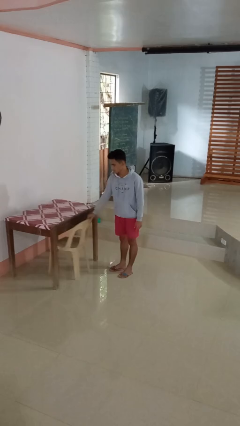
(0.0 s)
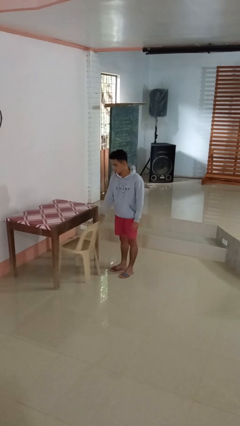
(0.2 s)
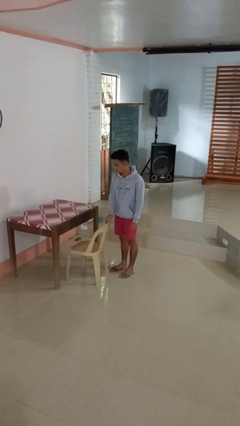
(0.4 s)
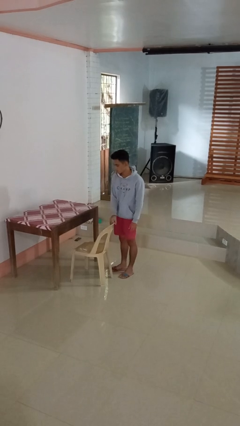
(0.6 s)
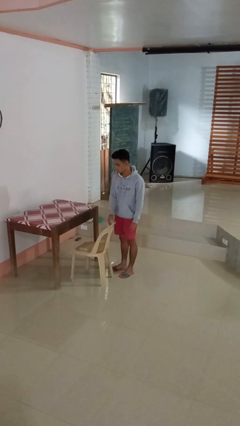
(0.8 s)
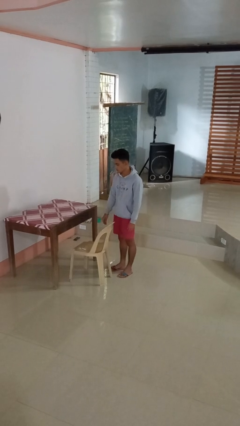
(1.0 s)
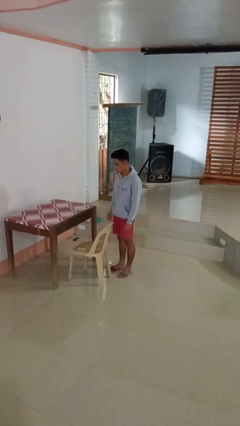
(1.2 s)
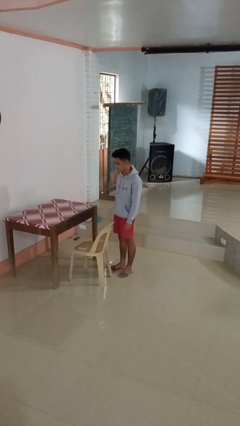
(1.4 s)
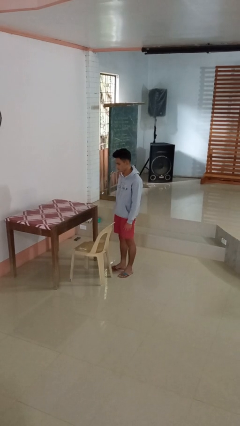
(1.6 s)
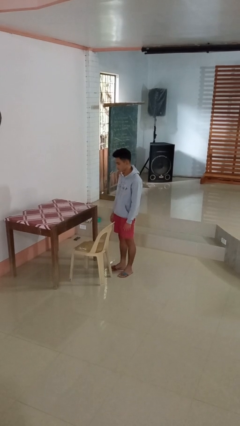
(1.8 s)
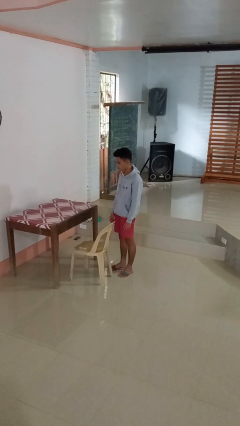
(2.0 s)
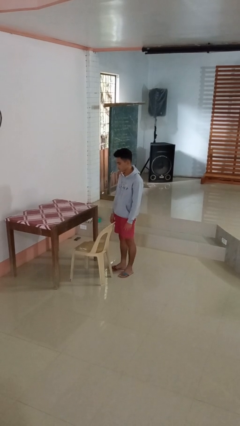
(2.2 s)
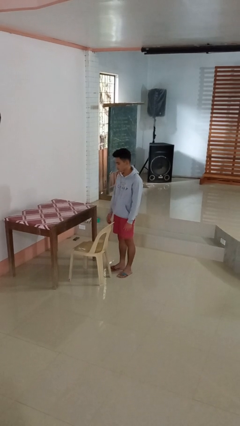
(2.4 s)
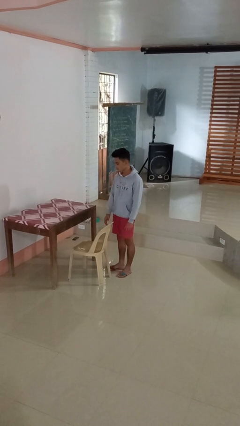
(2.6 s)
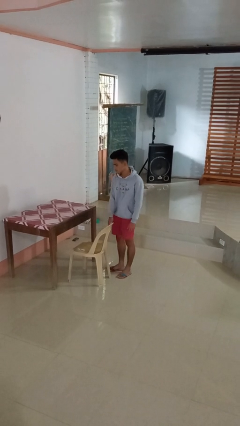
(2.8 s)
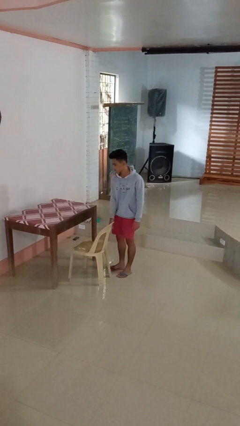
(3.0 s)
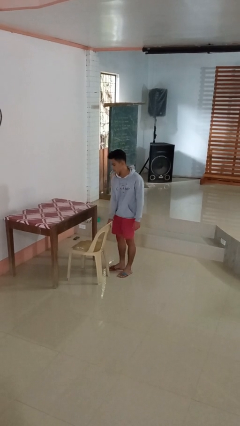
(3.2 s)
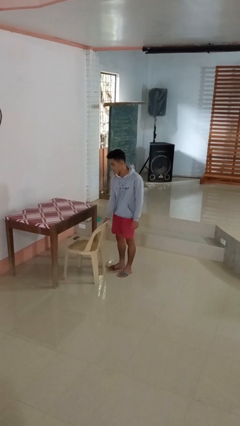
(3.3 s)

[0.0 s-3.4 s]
person pulls out chair

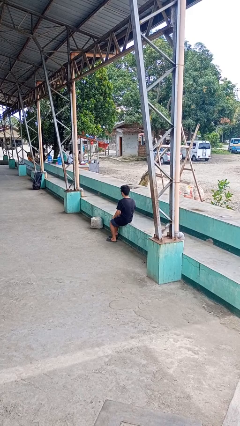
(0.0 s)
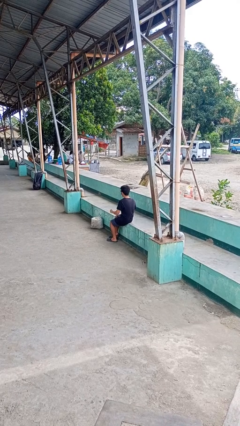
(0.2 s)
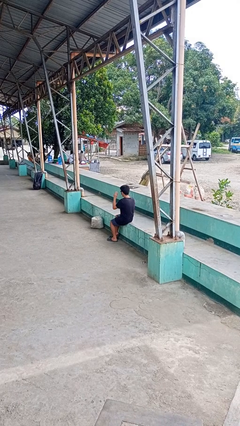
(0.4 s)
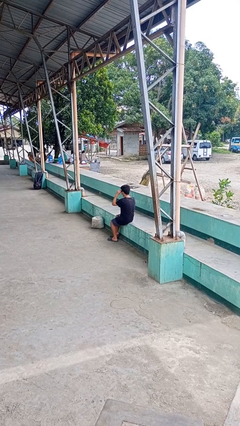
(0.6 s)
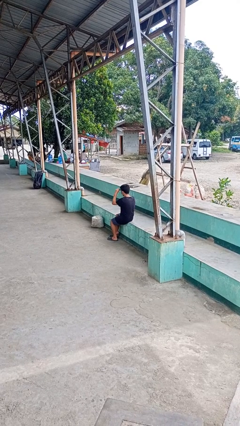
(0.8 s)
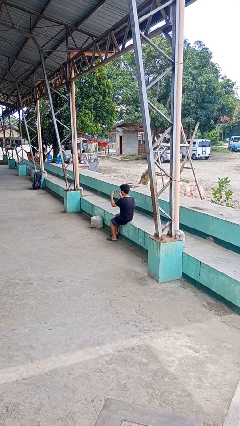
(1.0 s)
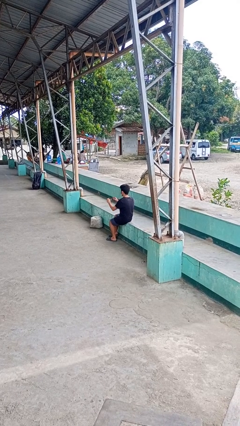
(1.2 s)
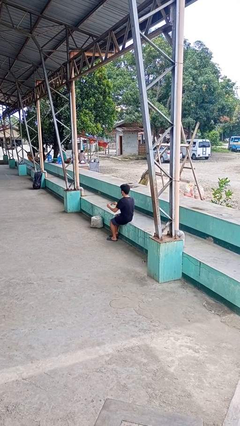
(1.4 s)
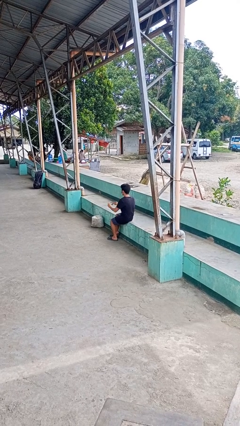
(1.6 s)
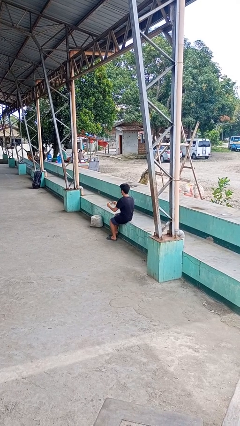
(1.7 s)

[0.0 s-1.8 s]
person takes off sunglasses

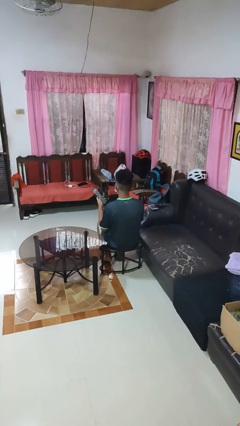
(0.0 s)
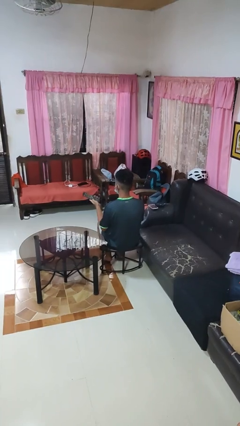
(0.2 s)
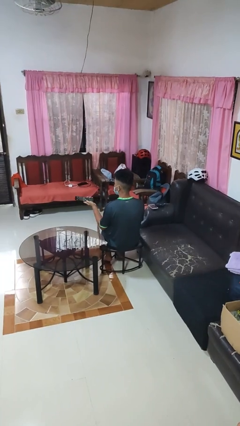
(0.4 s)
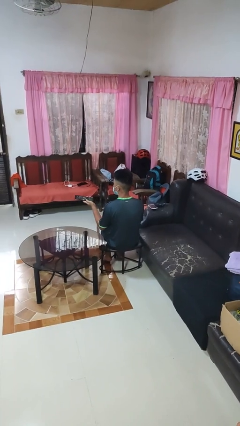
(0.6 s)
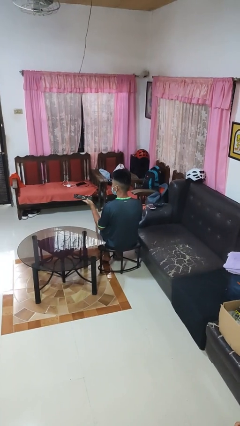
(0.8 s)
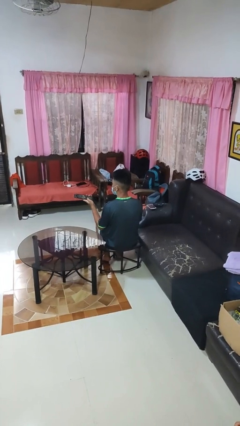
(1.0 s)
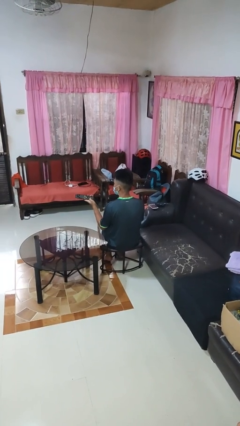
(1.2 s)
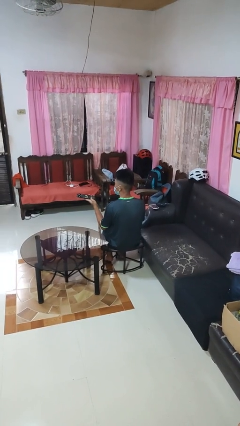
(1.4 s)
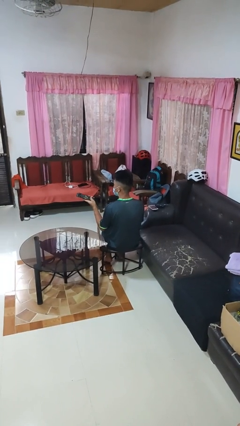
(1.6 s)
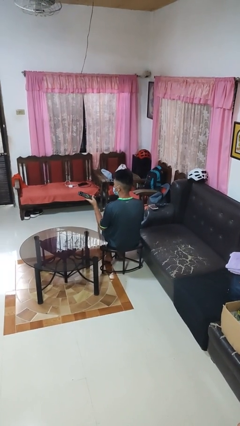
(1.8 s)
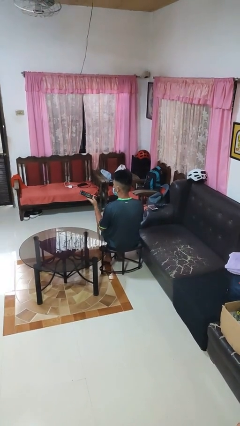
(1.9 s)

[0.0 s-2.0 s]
person uses television remote

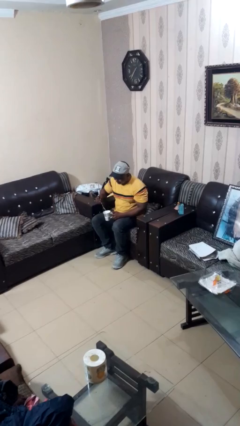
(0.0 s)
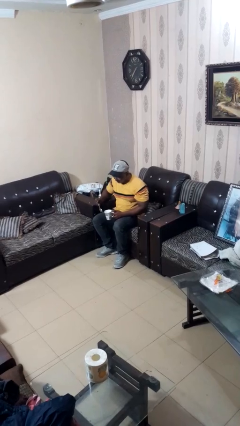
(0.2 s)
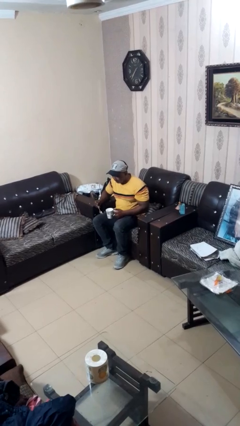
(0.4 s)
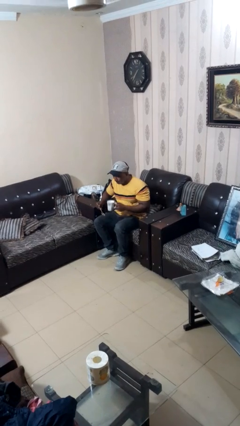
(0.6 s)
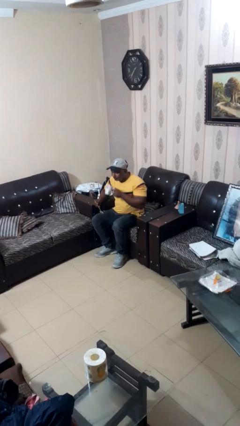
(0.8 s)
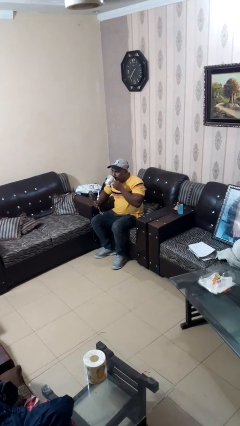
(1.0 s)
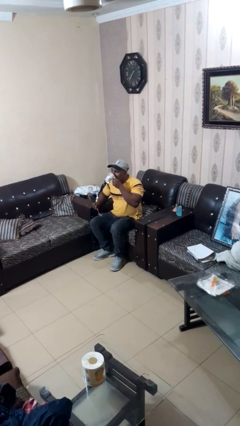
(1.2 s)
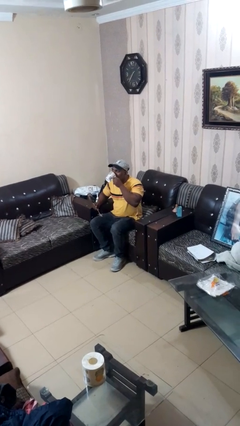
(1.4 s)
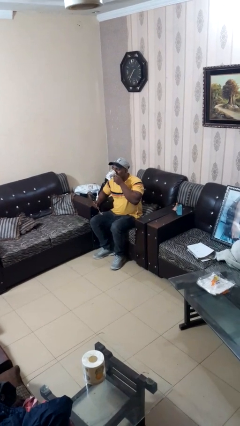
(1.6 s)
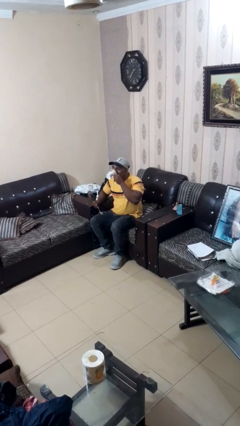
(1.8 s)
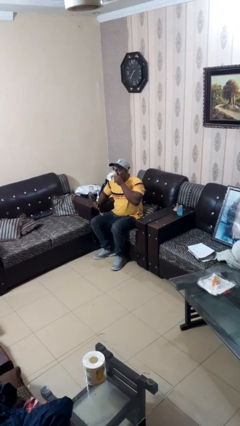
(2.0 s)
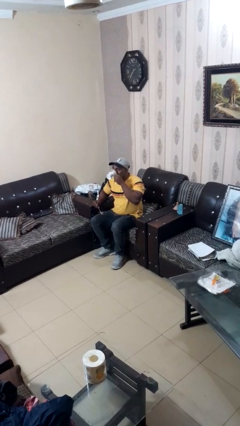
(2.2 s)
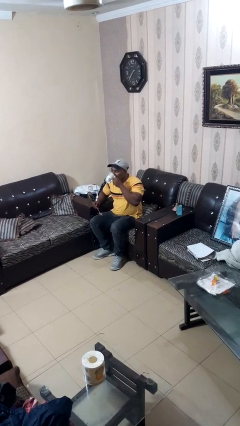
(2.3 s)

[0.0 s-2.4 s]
person drinks from mug

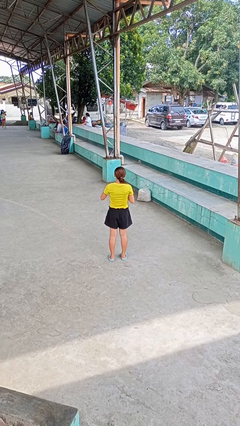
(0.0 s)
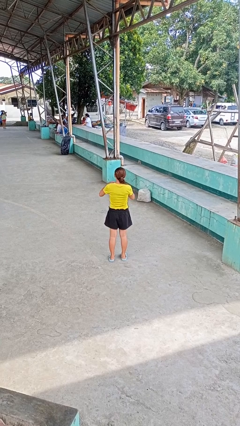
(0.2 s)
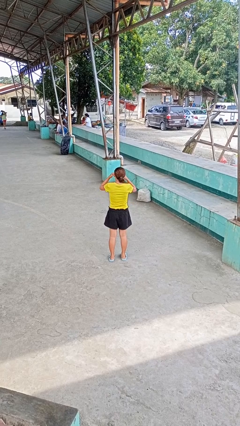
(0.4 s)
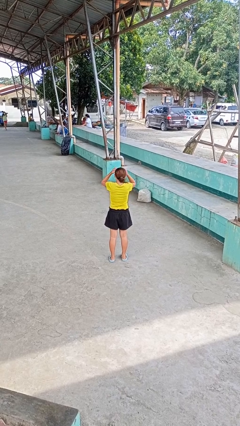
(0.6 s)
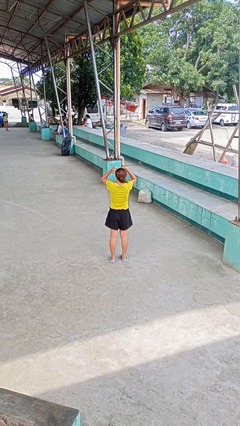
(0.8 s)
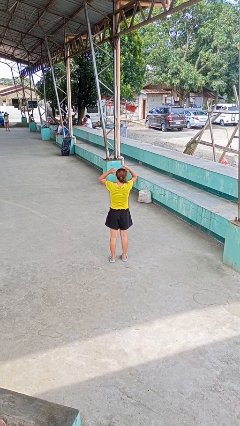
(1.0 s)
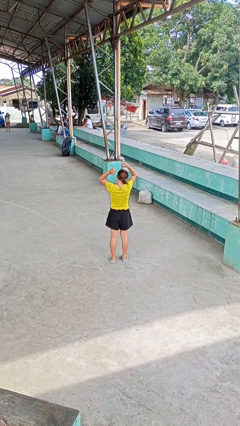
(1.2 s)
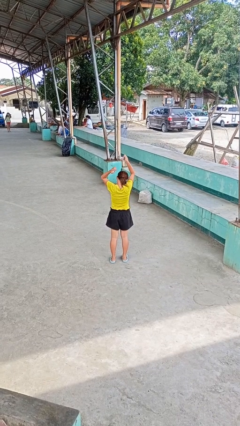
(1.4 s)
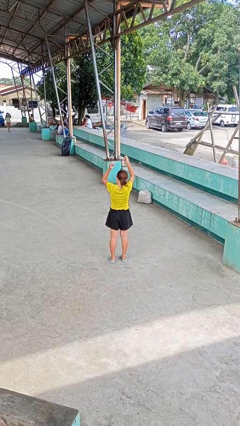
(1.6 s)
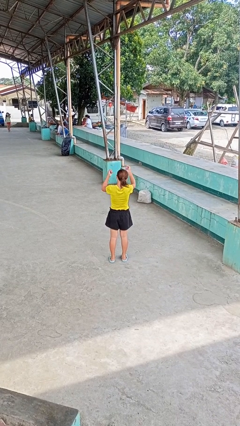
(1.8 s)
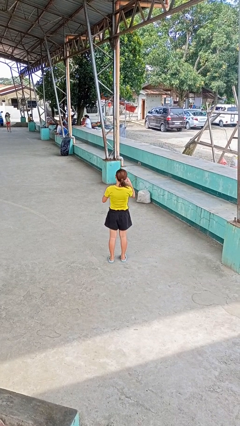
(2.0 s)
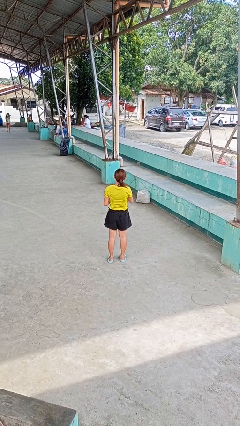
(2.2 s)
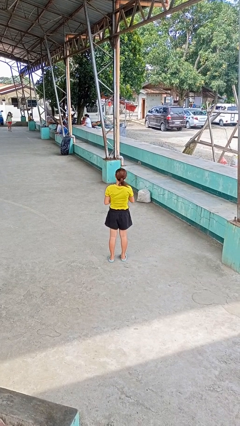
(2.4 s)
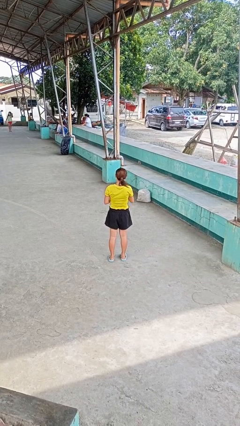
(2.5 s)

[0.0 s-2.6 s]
person takes off necklace

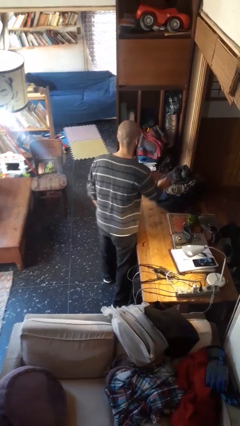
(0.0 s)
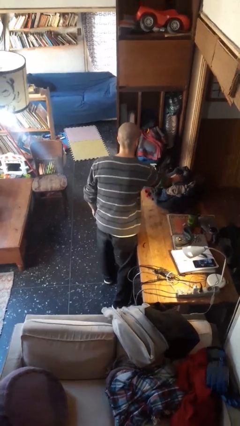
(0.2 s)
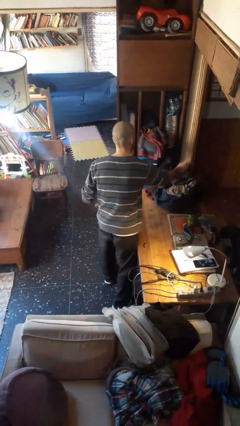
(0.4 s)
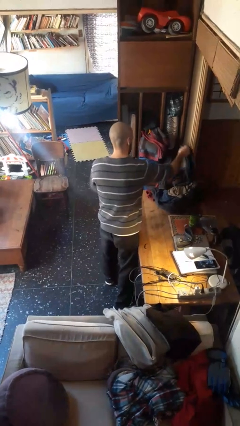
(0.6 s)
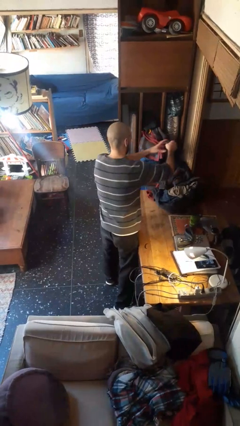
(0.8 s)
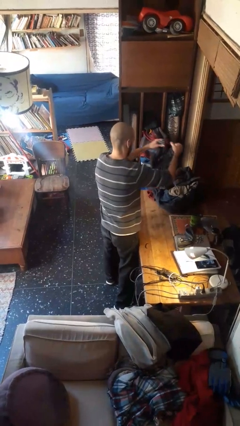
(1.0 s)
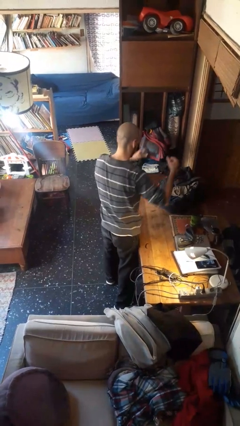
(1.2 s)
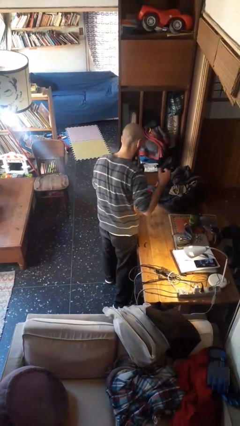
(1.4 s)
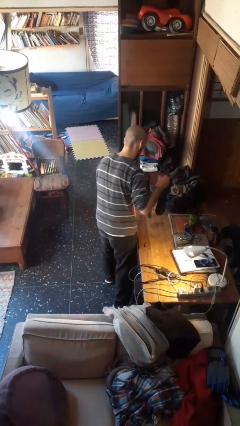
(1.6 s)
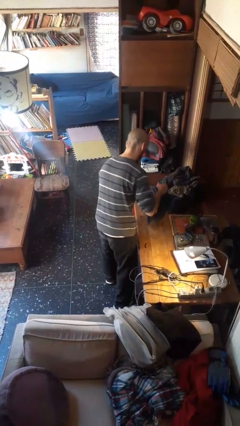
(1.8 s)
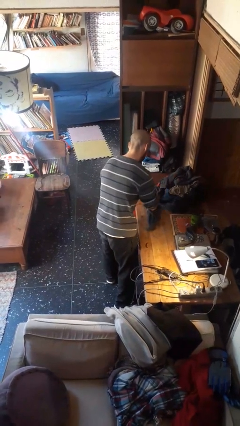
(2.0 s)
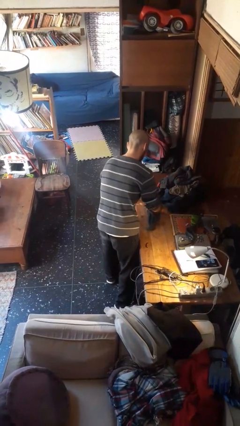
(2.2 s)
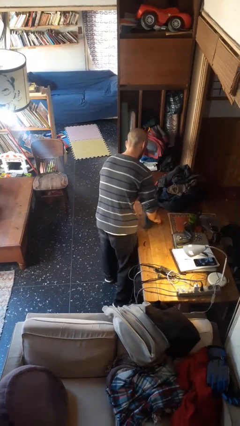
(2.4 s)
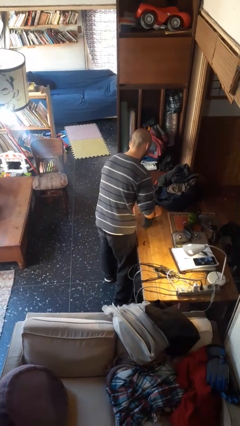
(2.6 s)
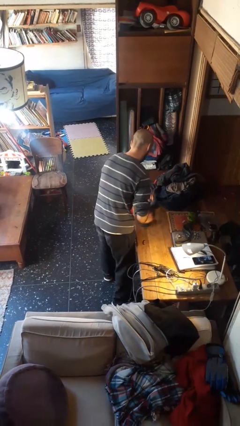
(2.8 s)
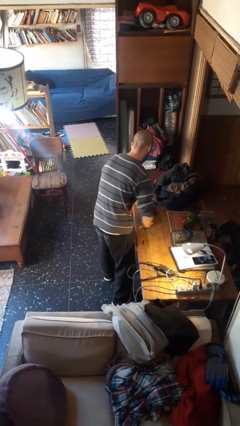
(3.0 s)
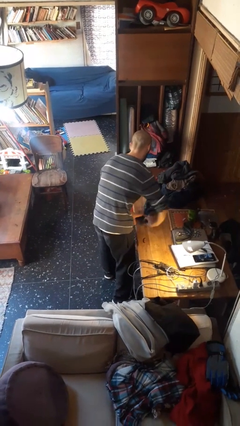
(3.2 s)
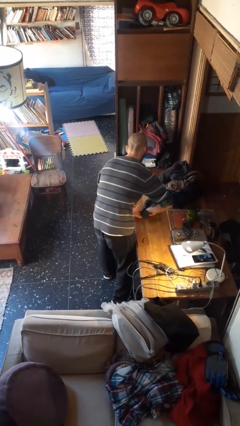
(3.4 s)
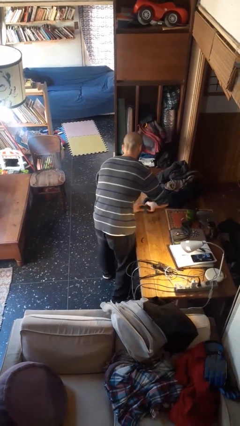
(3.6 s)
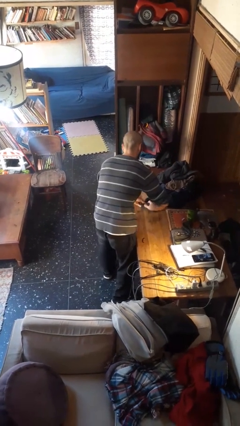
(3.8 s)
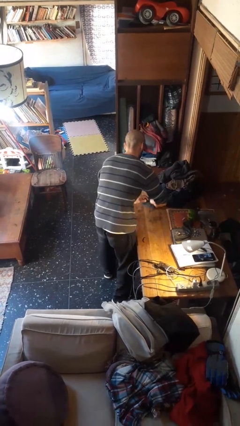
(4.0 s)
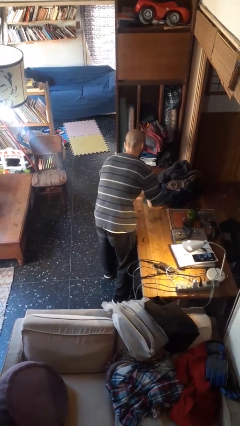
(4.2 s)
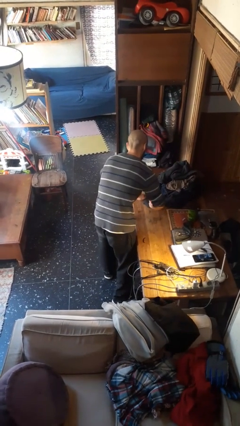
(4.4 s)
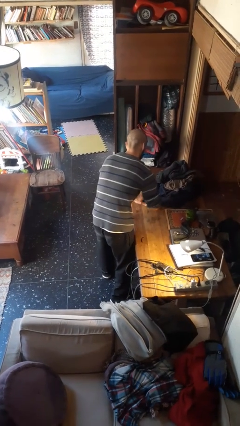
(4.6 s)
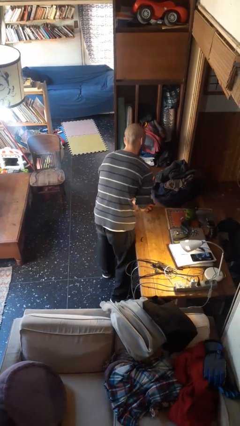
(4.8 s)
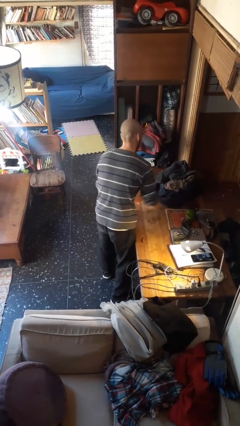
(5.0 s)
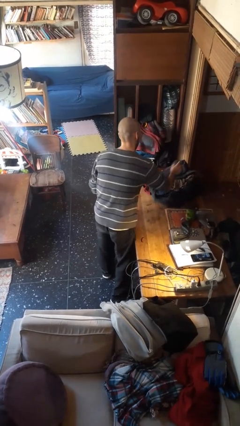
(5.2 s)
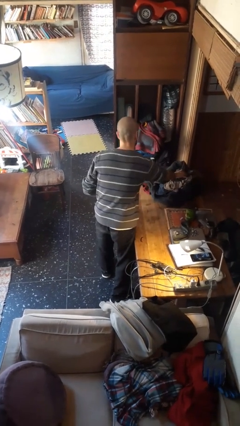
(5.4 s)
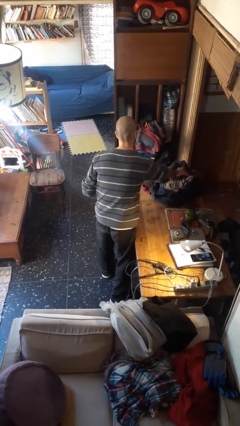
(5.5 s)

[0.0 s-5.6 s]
person folds socks
